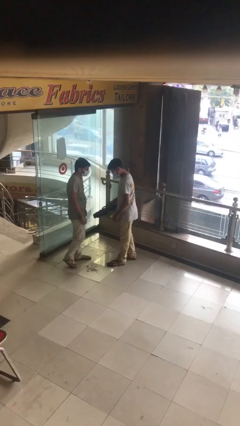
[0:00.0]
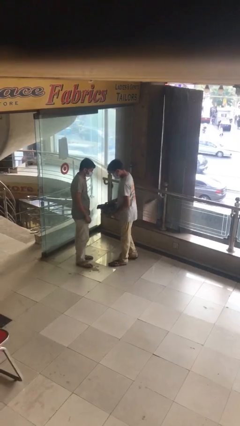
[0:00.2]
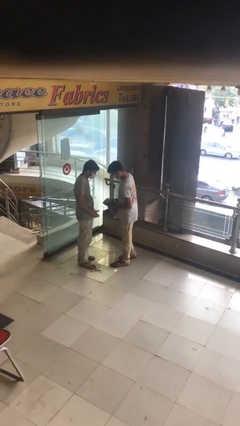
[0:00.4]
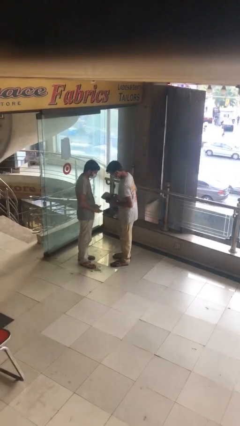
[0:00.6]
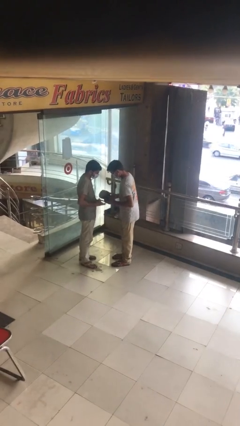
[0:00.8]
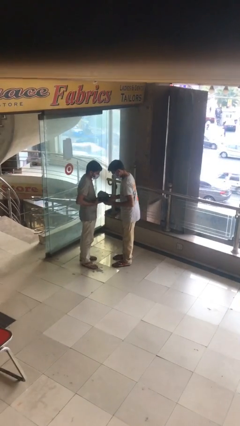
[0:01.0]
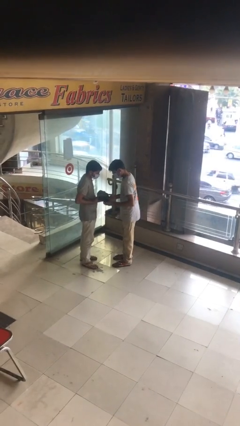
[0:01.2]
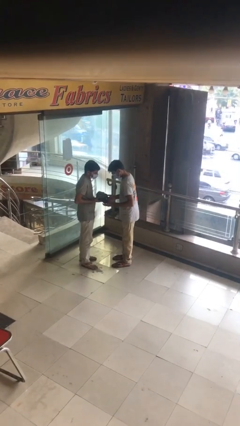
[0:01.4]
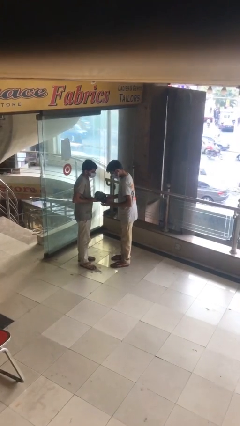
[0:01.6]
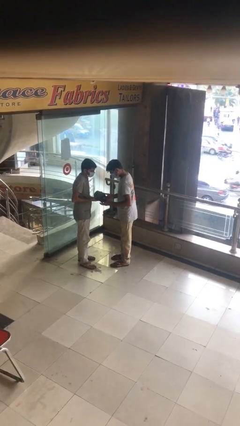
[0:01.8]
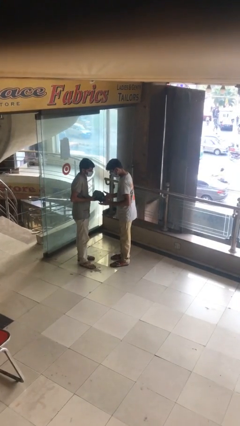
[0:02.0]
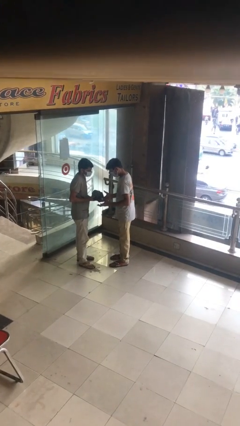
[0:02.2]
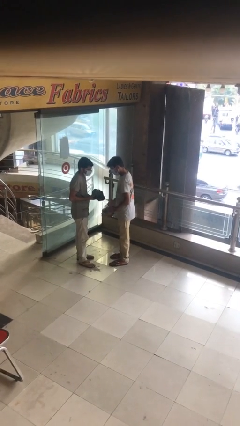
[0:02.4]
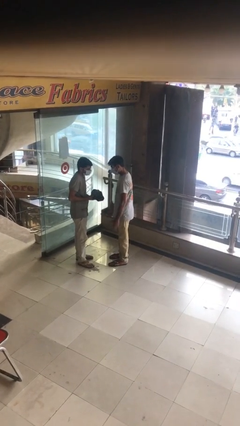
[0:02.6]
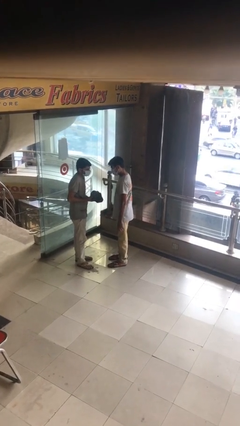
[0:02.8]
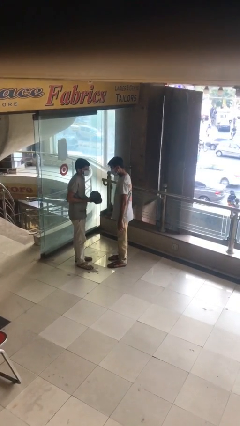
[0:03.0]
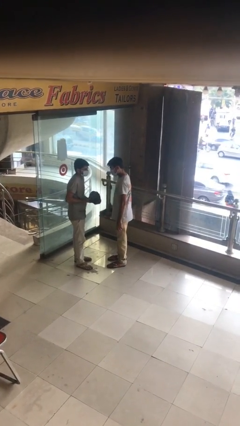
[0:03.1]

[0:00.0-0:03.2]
person transfers object to person

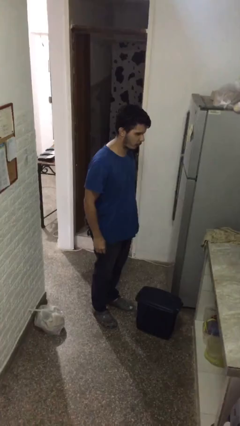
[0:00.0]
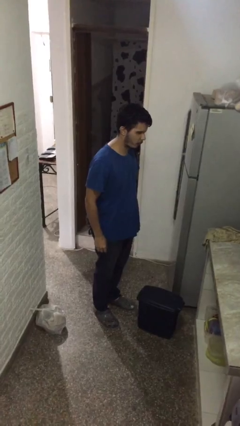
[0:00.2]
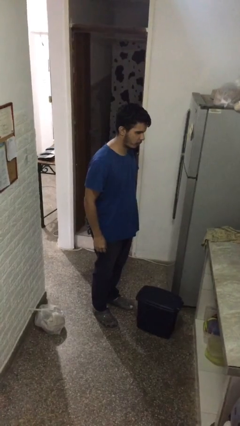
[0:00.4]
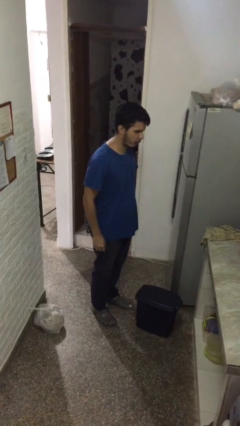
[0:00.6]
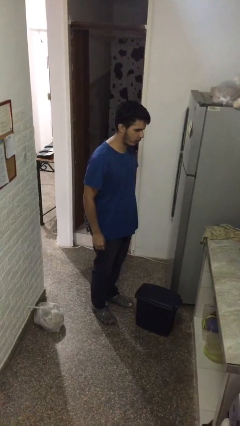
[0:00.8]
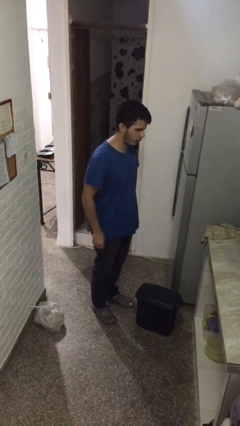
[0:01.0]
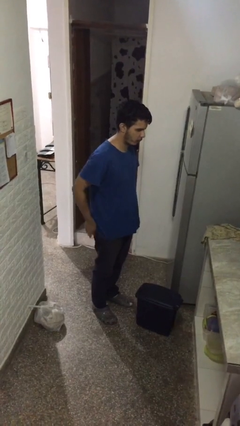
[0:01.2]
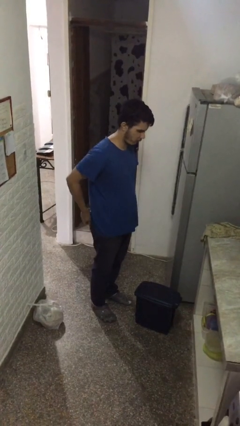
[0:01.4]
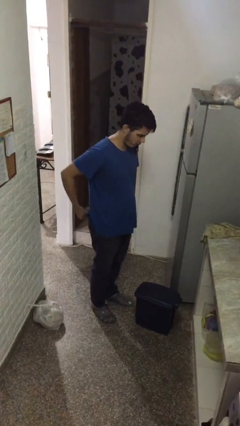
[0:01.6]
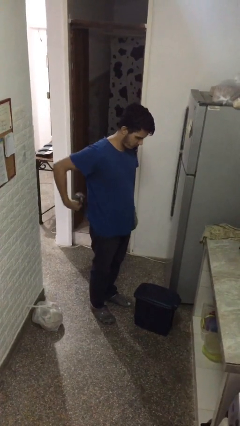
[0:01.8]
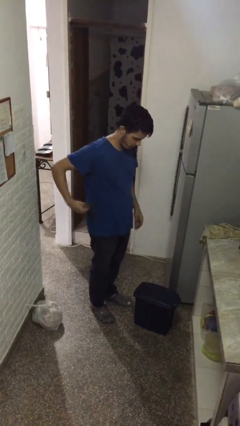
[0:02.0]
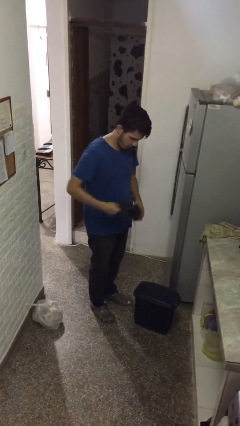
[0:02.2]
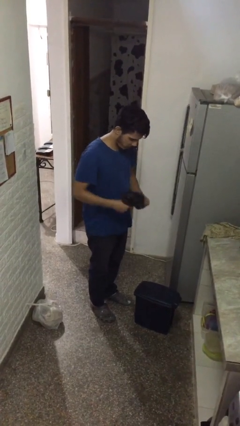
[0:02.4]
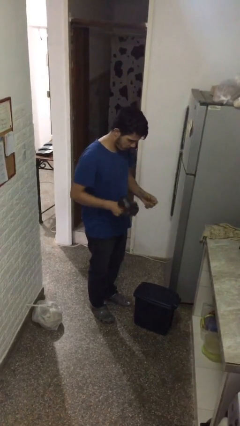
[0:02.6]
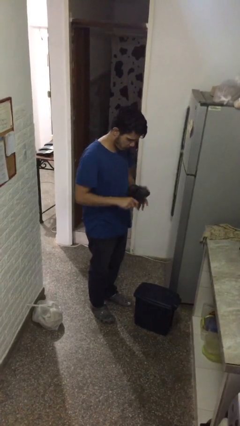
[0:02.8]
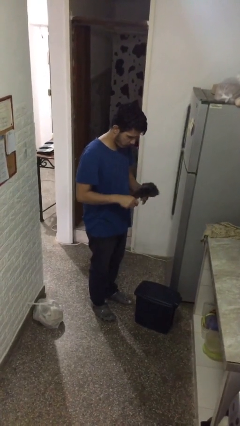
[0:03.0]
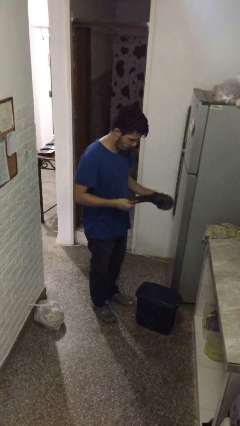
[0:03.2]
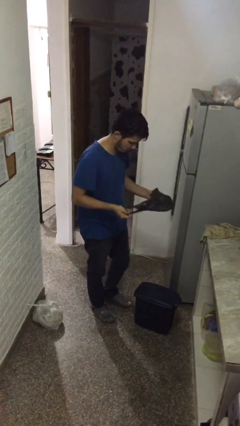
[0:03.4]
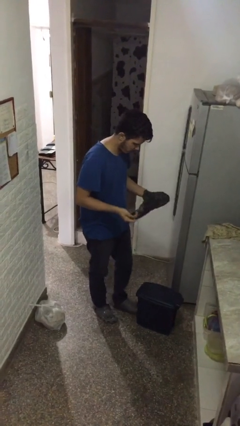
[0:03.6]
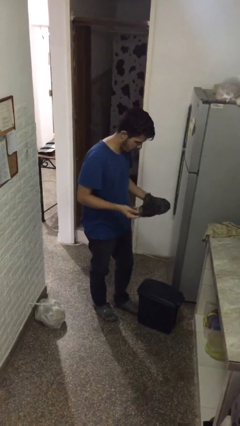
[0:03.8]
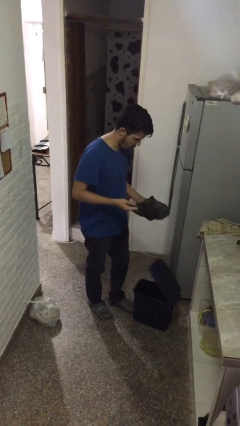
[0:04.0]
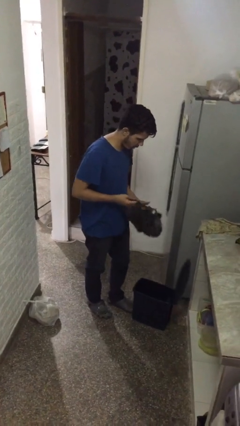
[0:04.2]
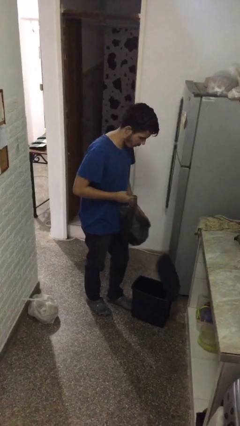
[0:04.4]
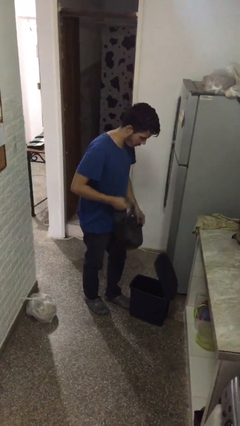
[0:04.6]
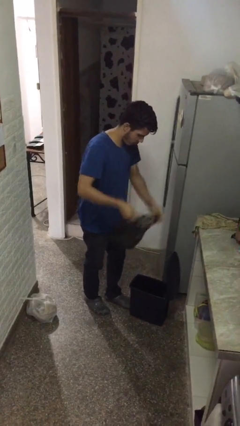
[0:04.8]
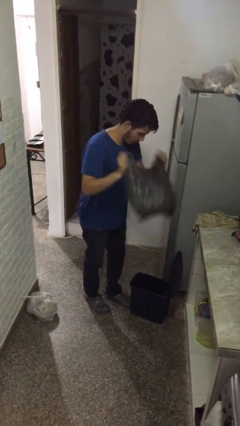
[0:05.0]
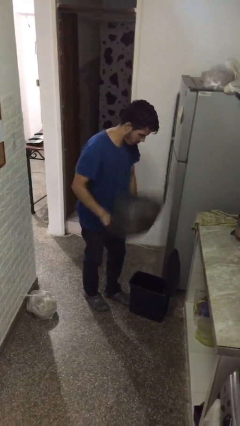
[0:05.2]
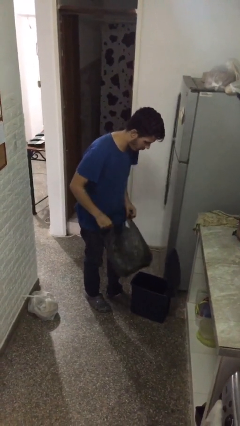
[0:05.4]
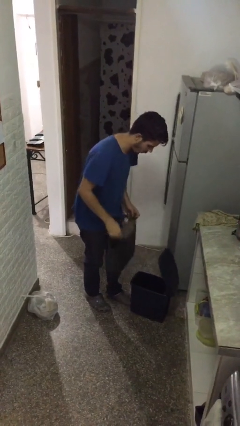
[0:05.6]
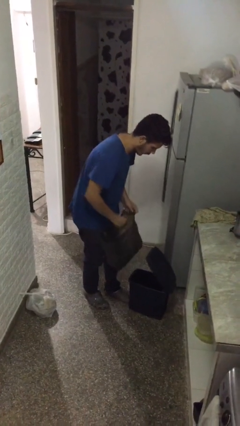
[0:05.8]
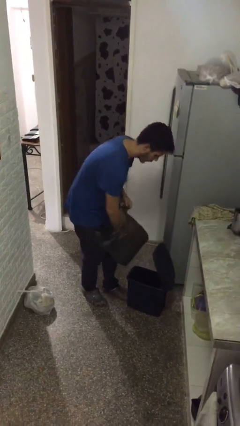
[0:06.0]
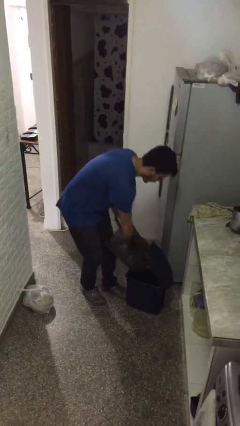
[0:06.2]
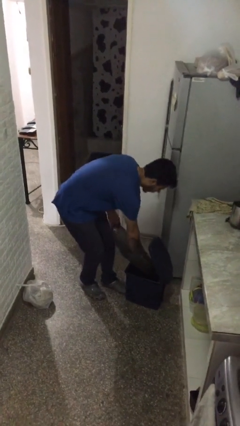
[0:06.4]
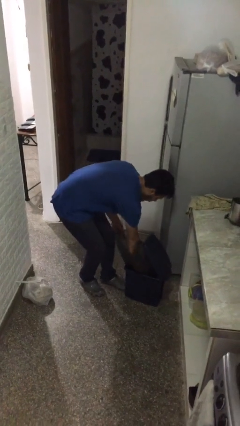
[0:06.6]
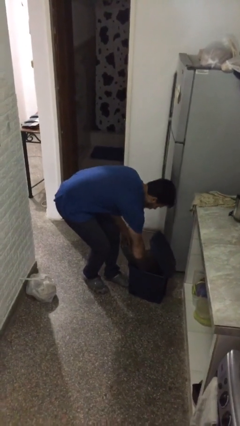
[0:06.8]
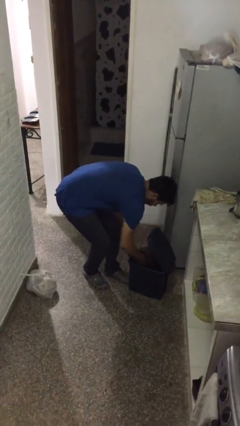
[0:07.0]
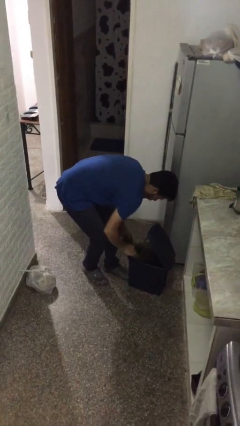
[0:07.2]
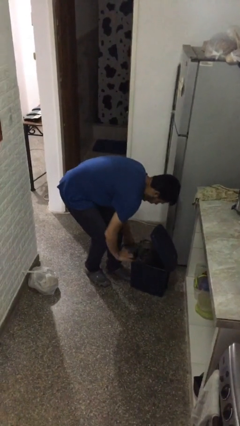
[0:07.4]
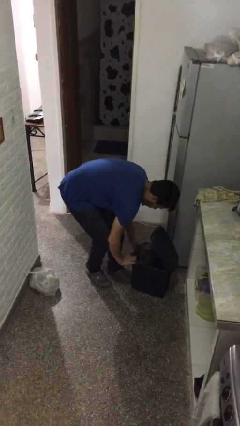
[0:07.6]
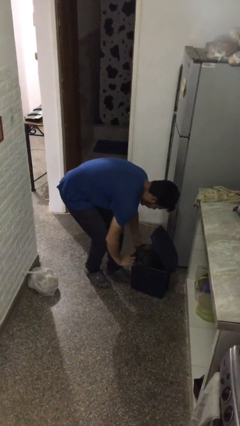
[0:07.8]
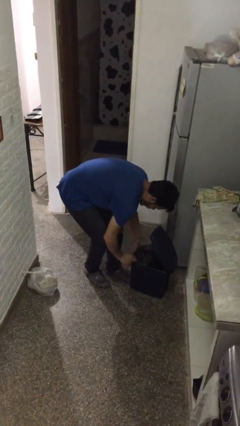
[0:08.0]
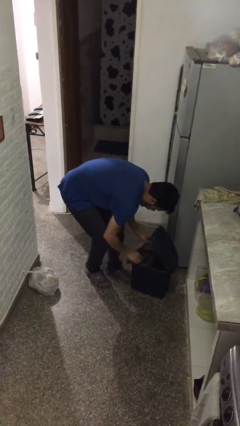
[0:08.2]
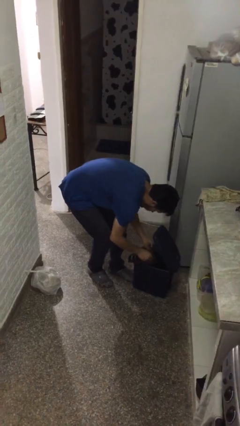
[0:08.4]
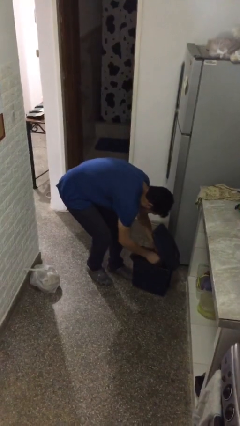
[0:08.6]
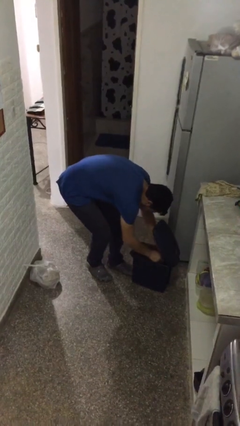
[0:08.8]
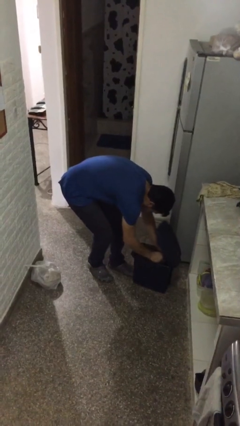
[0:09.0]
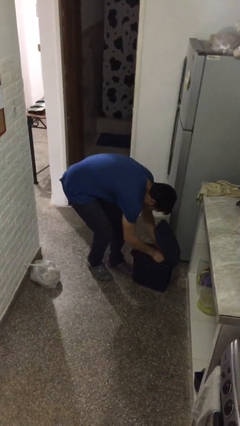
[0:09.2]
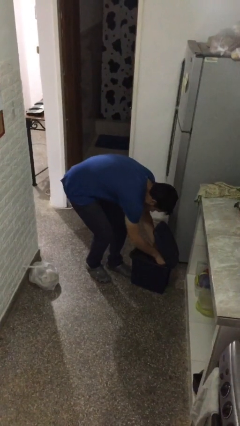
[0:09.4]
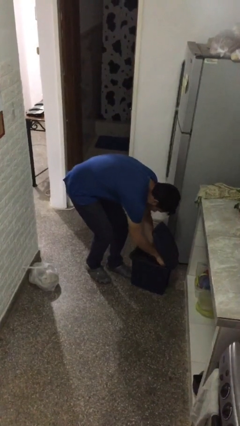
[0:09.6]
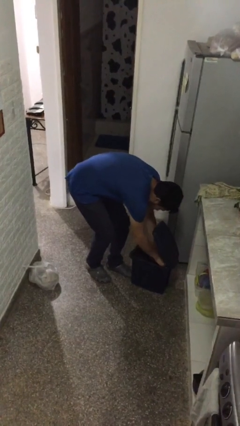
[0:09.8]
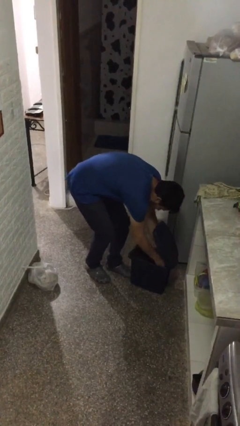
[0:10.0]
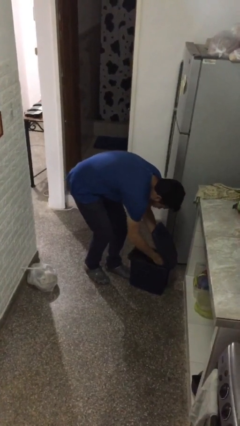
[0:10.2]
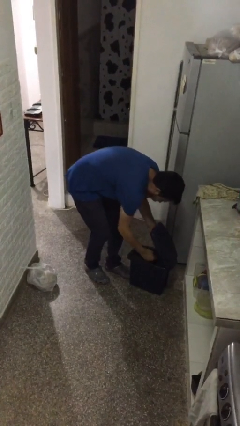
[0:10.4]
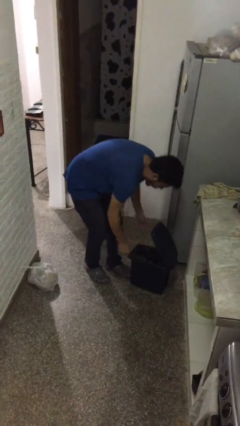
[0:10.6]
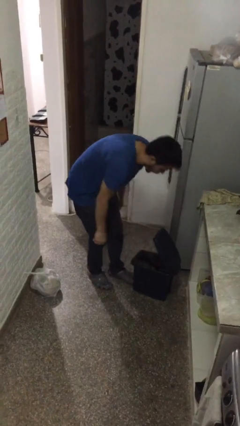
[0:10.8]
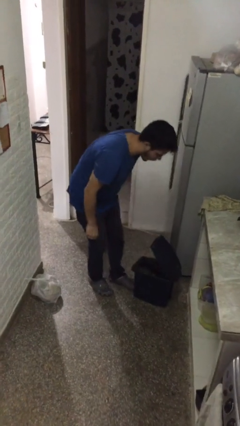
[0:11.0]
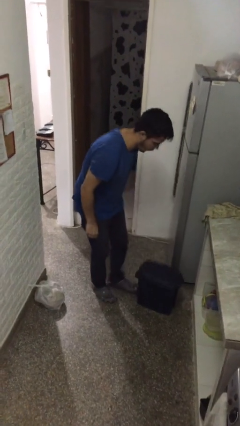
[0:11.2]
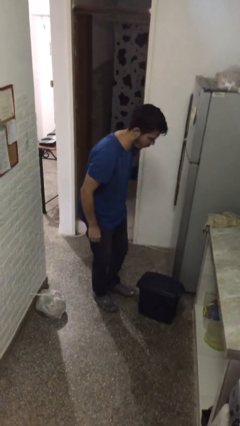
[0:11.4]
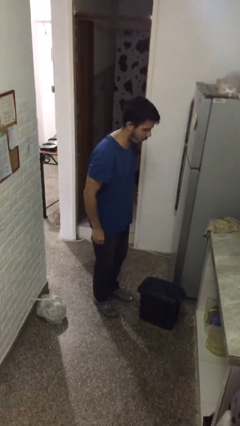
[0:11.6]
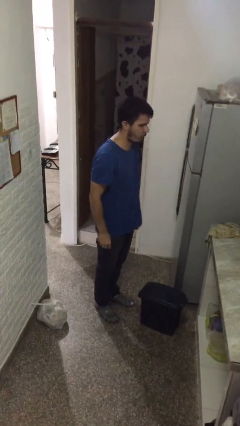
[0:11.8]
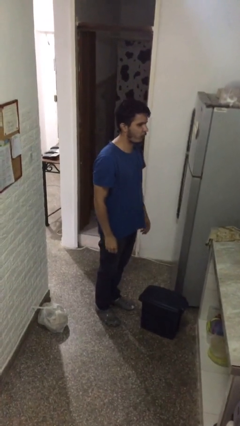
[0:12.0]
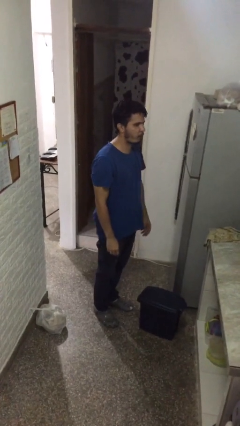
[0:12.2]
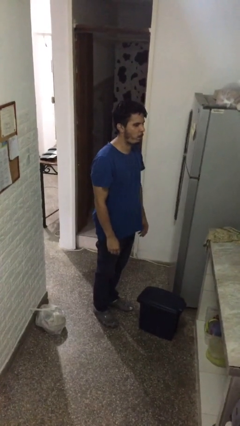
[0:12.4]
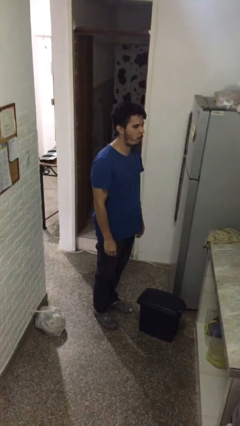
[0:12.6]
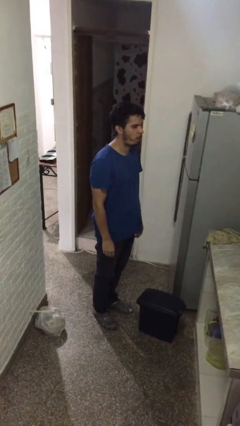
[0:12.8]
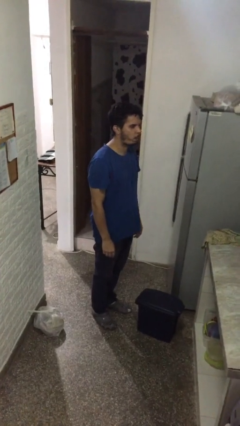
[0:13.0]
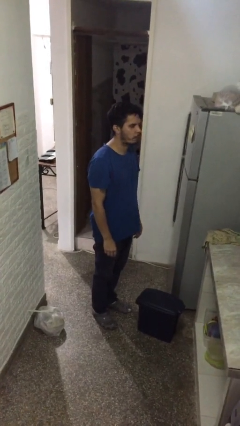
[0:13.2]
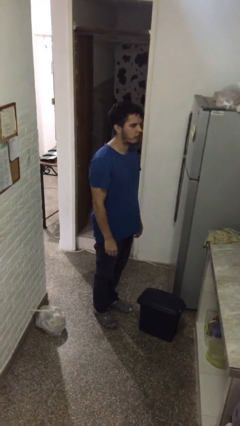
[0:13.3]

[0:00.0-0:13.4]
person inserts trashbag into trashcan

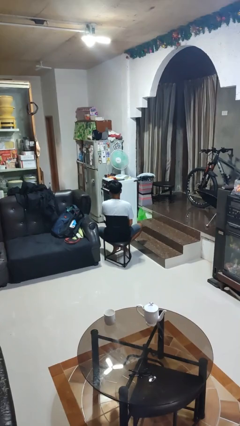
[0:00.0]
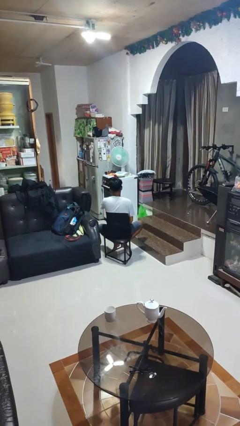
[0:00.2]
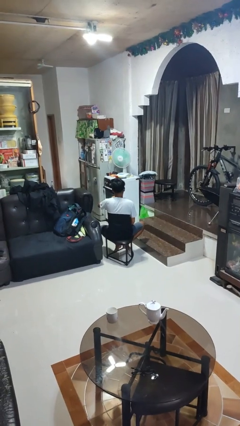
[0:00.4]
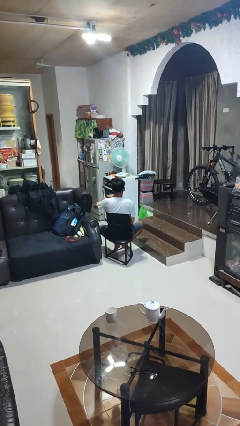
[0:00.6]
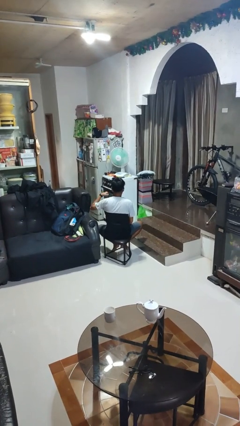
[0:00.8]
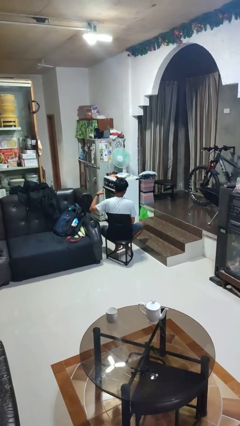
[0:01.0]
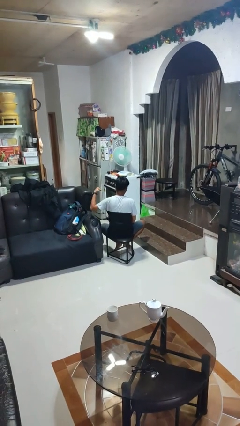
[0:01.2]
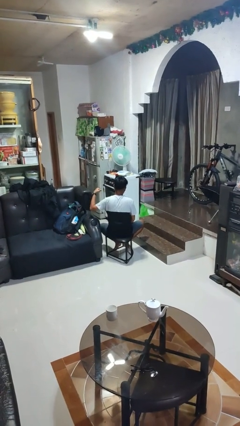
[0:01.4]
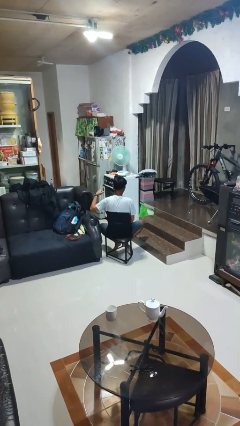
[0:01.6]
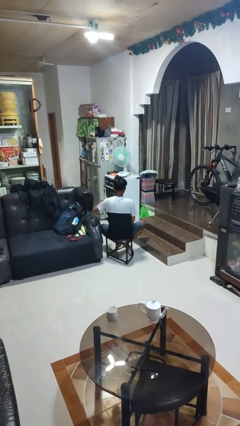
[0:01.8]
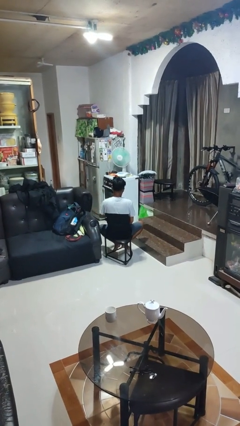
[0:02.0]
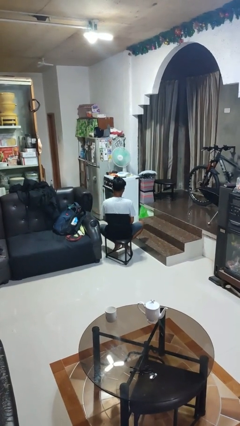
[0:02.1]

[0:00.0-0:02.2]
person gestures cut
